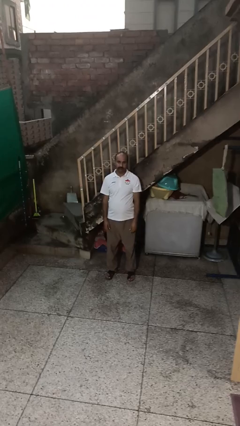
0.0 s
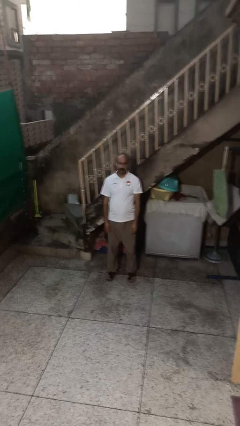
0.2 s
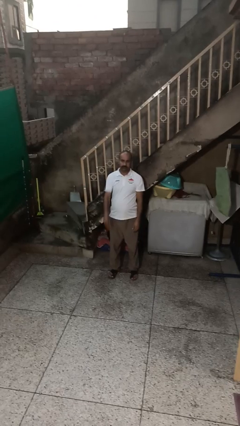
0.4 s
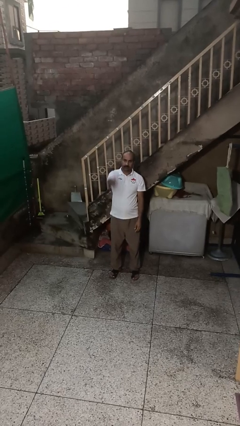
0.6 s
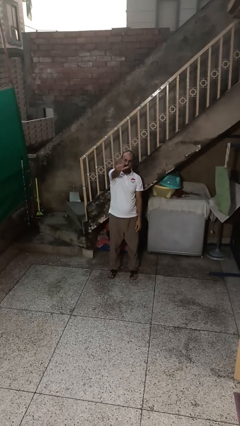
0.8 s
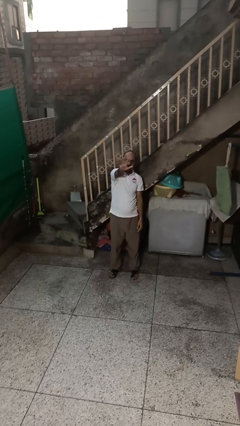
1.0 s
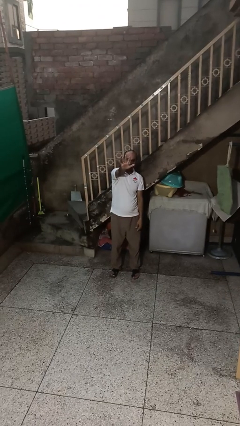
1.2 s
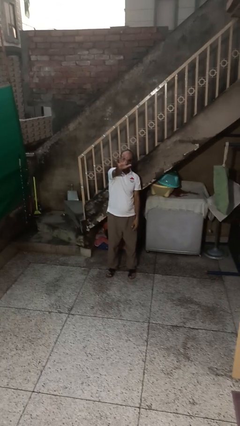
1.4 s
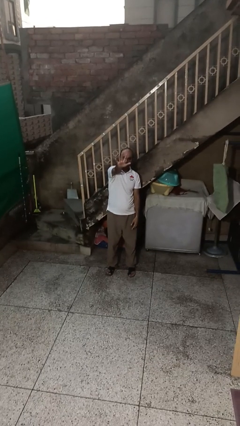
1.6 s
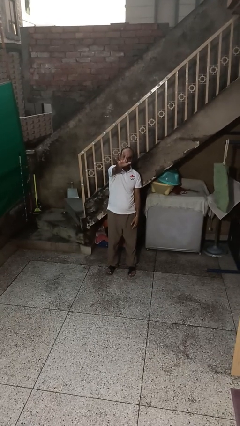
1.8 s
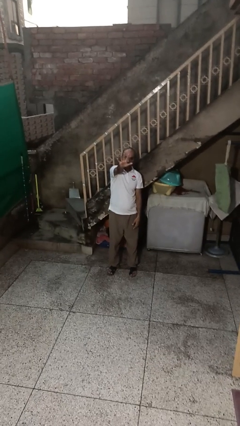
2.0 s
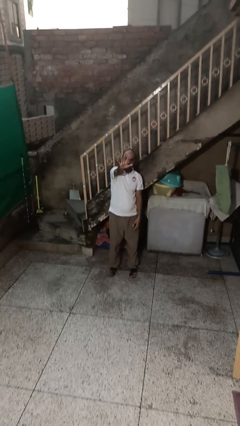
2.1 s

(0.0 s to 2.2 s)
person gestures number five

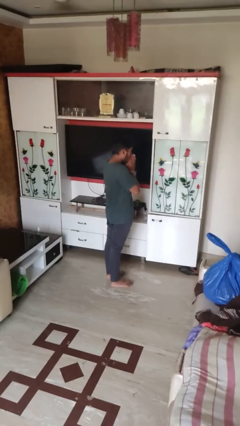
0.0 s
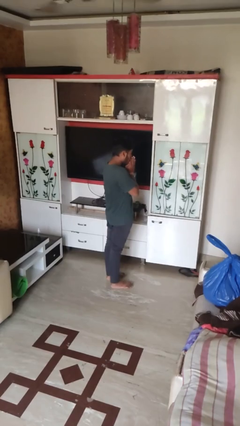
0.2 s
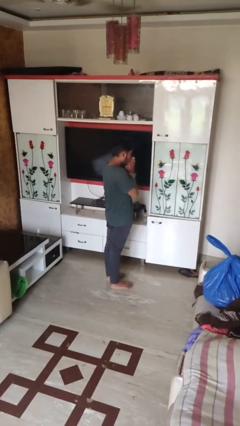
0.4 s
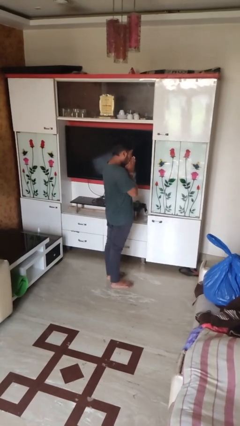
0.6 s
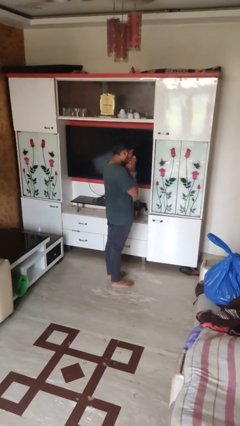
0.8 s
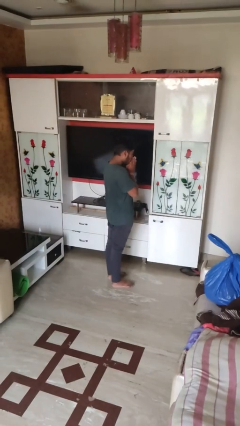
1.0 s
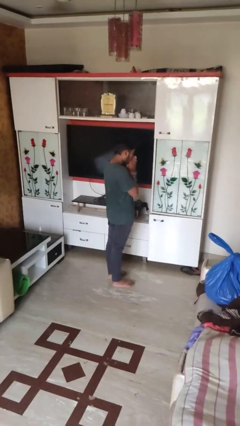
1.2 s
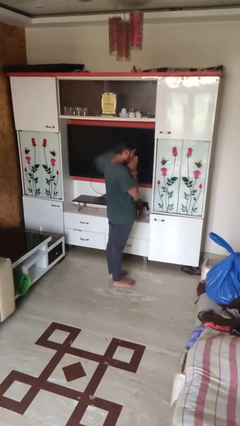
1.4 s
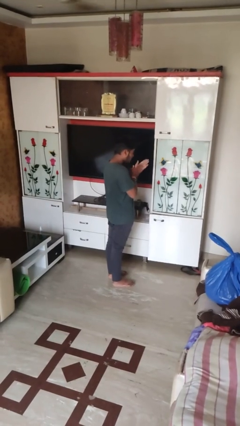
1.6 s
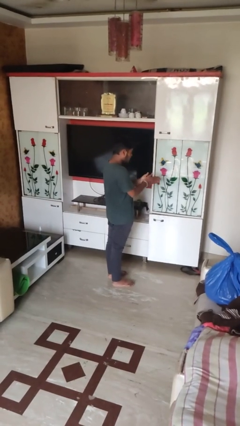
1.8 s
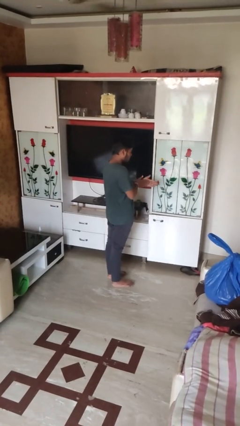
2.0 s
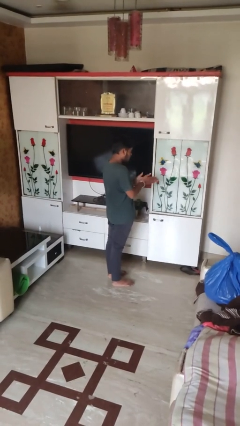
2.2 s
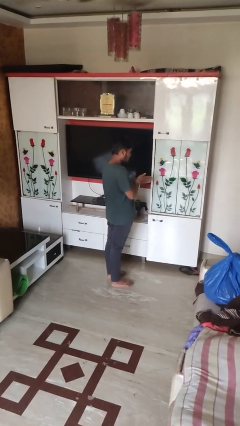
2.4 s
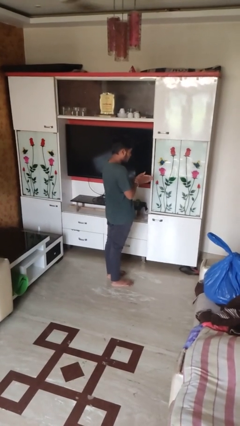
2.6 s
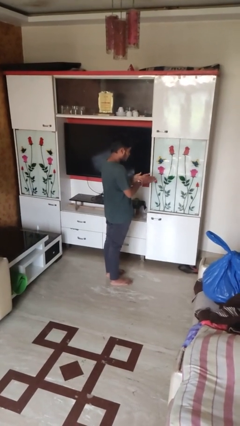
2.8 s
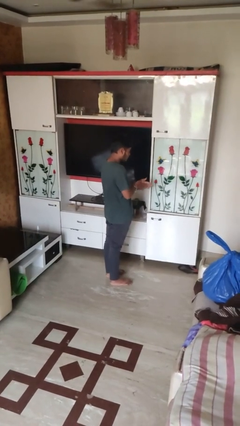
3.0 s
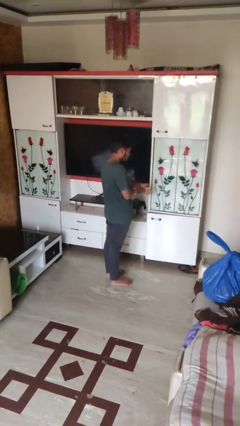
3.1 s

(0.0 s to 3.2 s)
person blows into hands

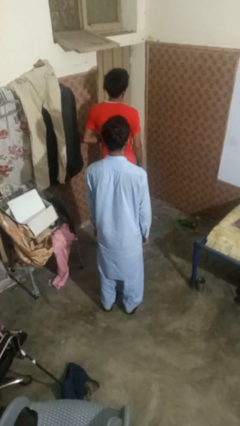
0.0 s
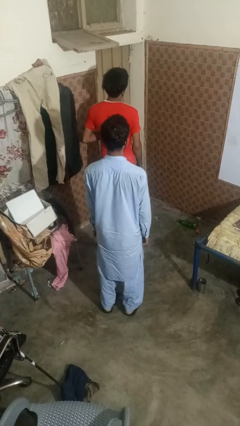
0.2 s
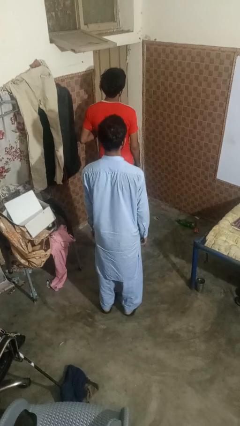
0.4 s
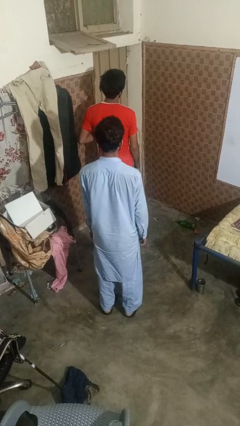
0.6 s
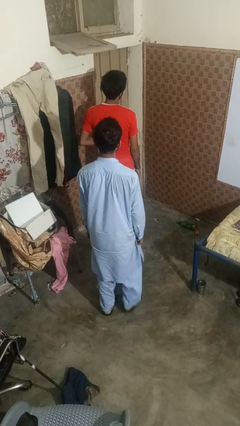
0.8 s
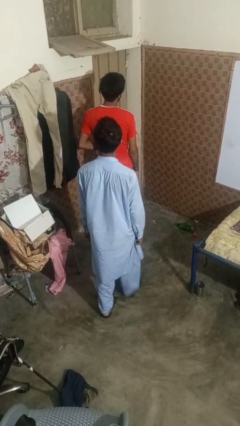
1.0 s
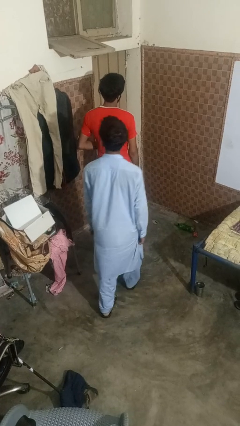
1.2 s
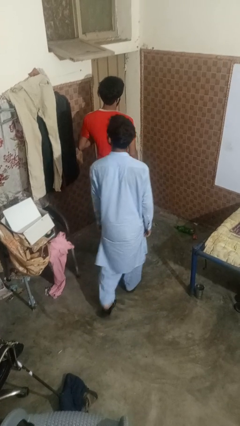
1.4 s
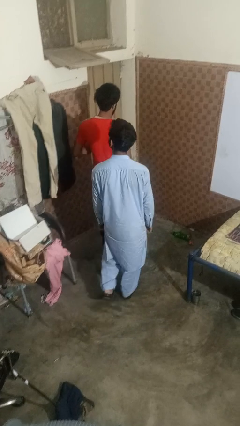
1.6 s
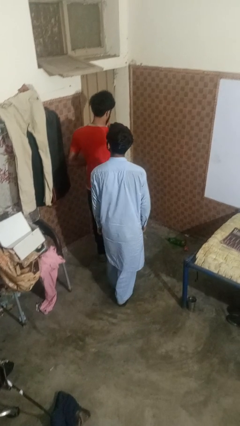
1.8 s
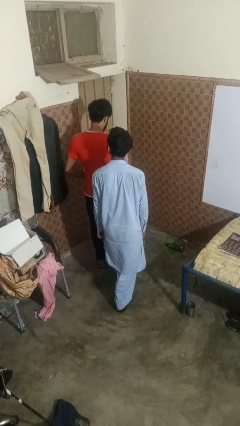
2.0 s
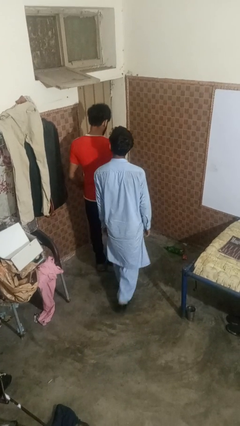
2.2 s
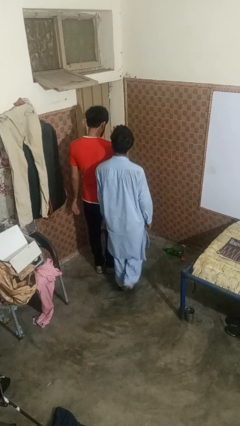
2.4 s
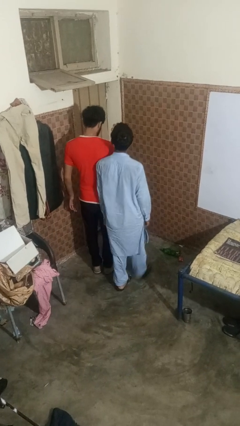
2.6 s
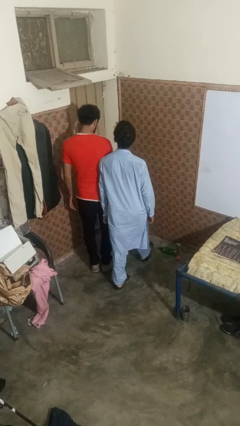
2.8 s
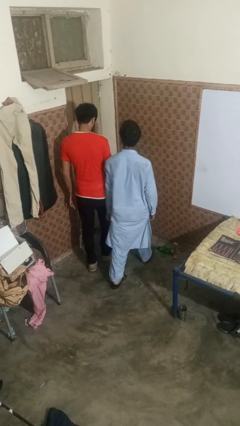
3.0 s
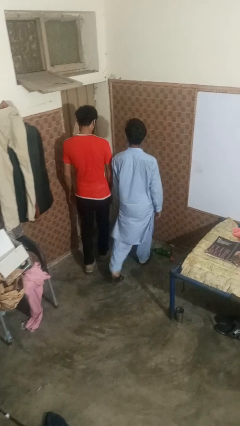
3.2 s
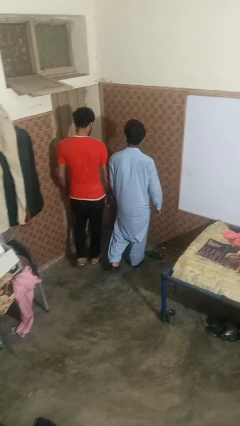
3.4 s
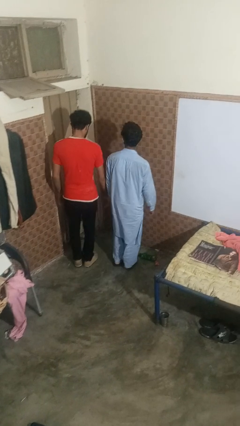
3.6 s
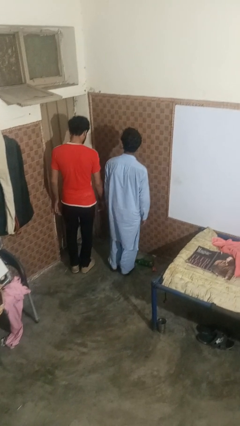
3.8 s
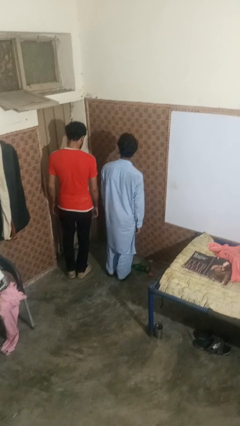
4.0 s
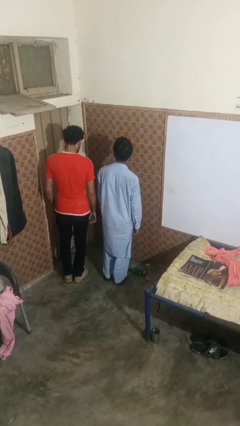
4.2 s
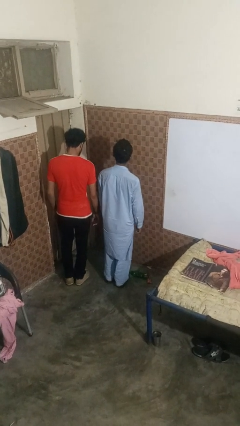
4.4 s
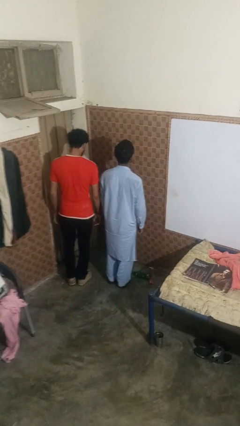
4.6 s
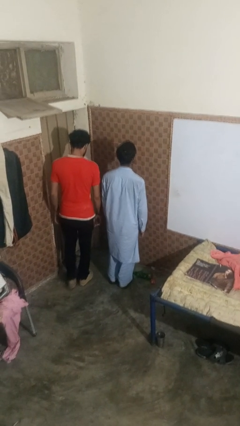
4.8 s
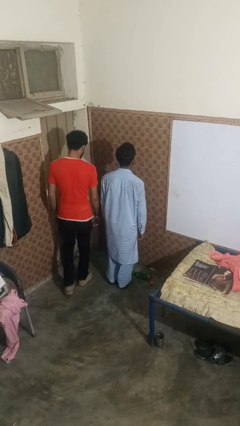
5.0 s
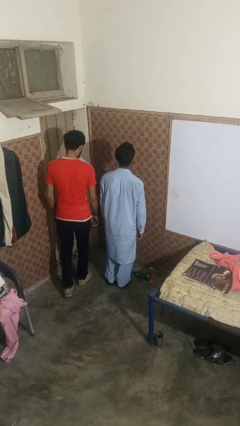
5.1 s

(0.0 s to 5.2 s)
person bumps into person

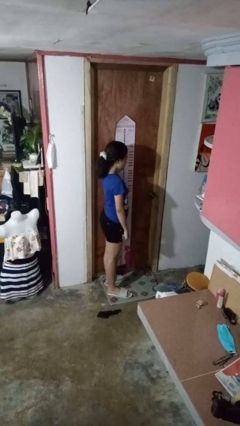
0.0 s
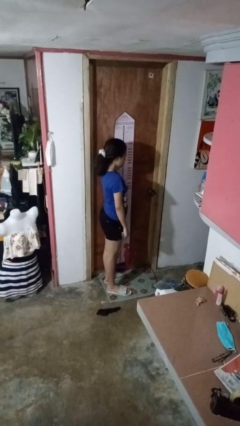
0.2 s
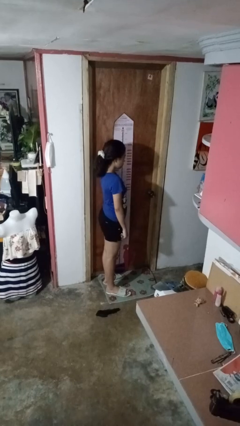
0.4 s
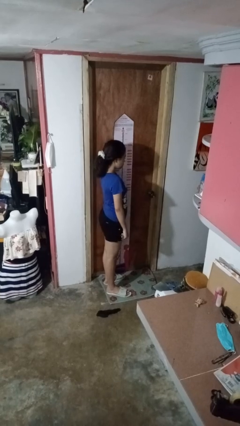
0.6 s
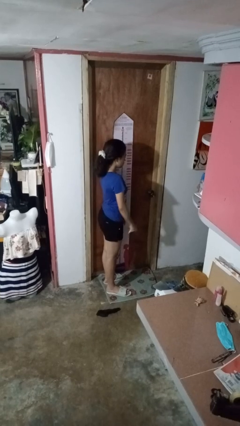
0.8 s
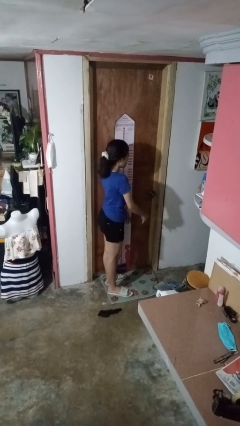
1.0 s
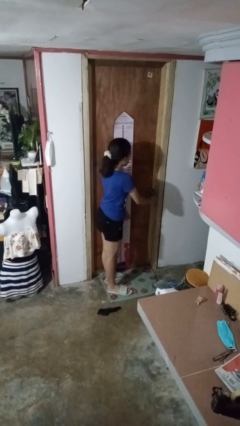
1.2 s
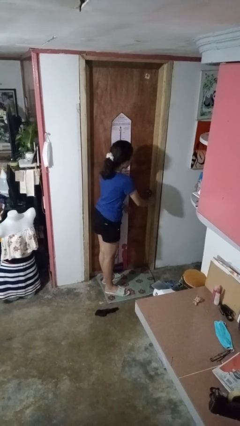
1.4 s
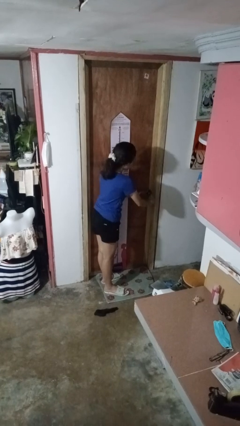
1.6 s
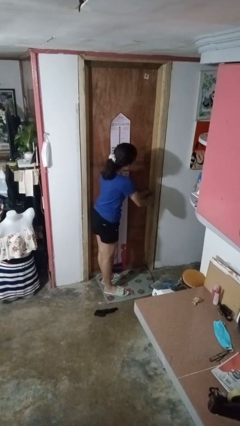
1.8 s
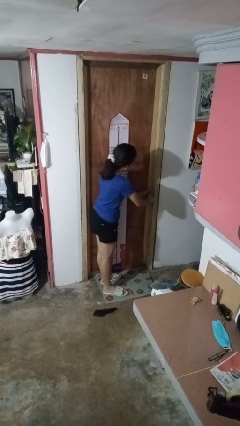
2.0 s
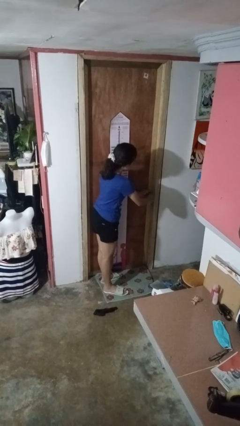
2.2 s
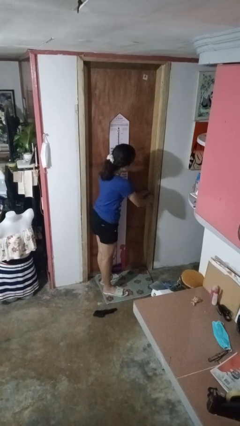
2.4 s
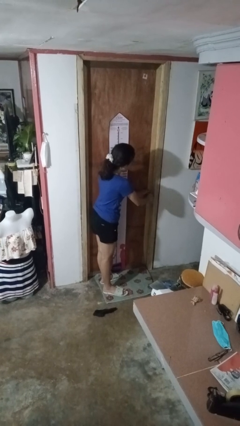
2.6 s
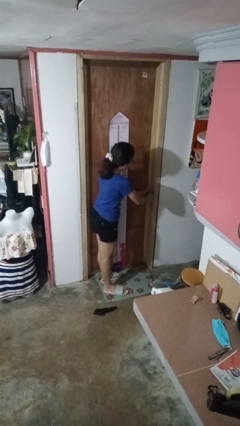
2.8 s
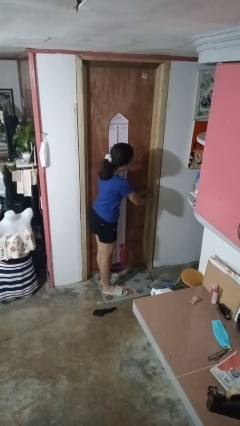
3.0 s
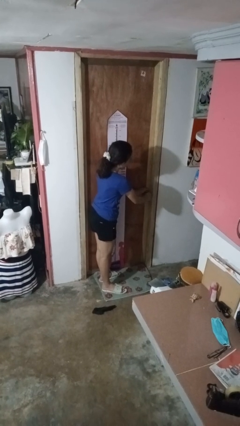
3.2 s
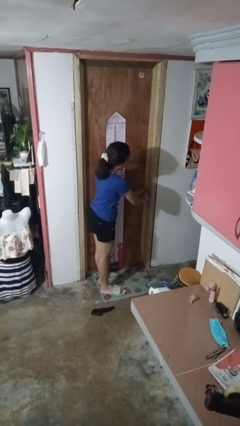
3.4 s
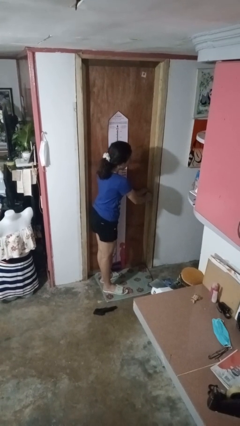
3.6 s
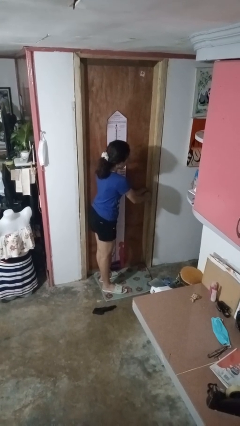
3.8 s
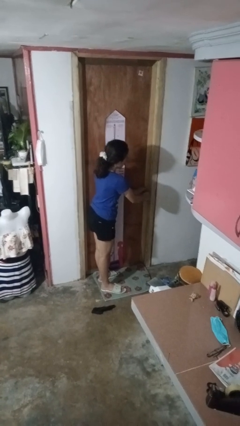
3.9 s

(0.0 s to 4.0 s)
person unlocks door with keys

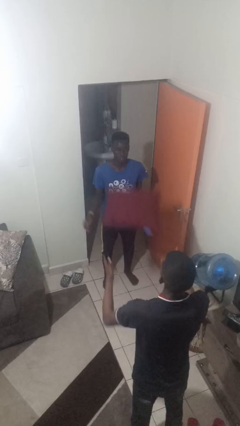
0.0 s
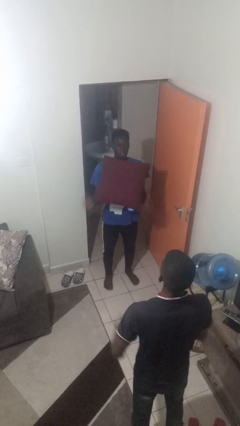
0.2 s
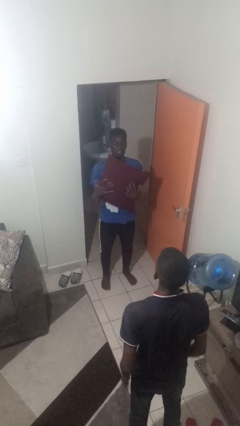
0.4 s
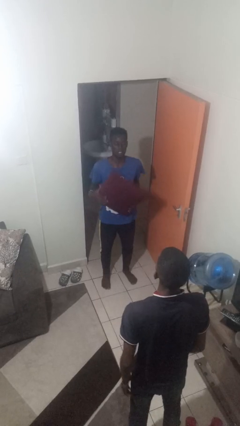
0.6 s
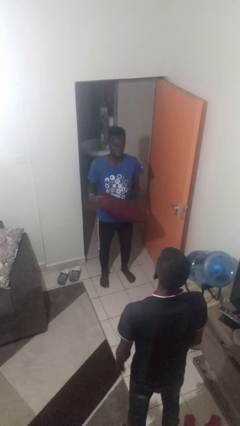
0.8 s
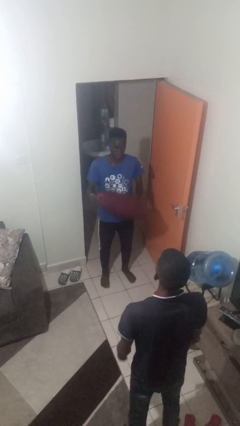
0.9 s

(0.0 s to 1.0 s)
person catches object from person

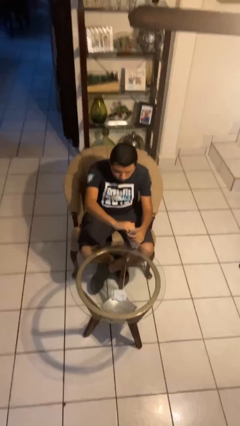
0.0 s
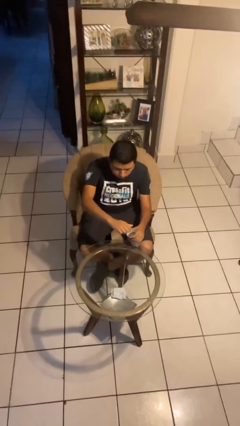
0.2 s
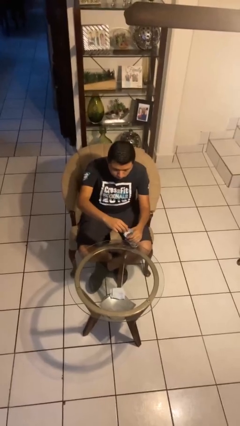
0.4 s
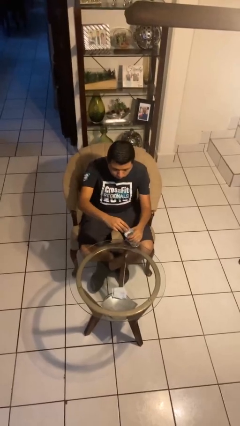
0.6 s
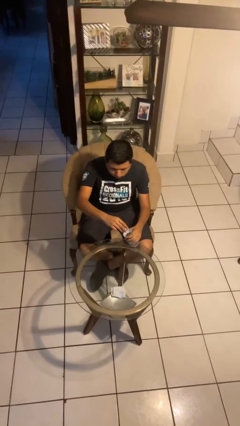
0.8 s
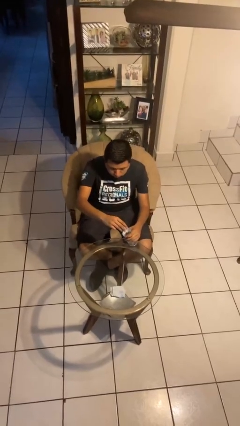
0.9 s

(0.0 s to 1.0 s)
person unscrews lid from bottle

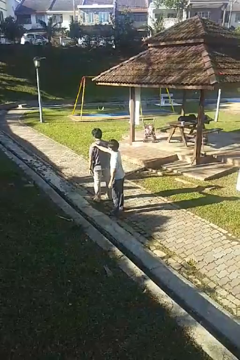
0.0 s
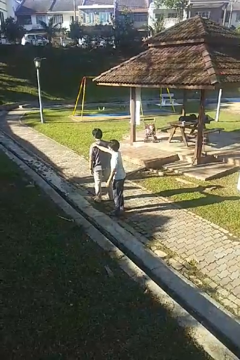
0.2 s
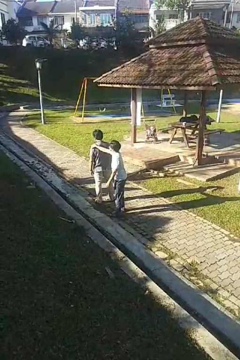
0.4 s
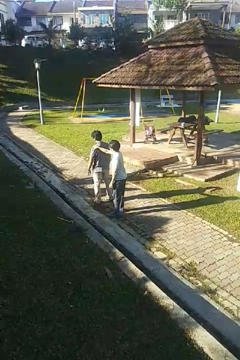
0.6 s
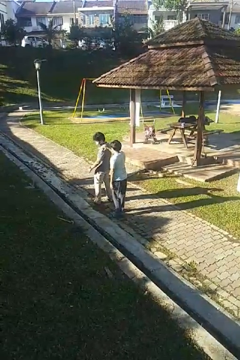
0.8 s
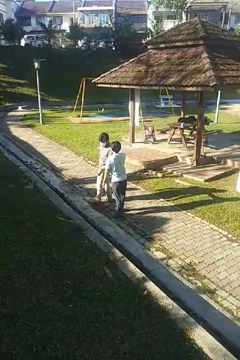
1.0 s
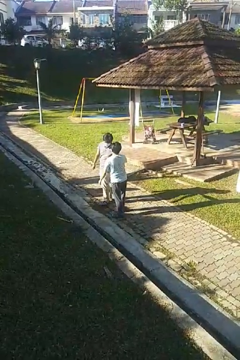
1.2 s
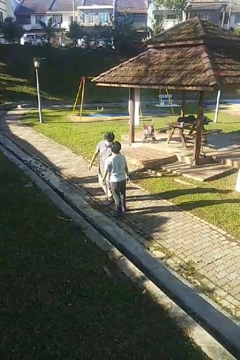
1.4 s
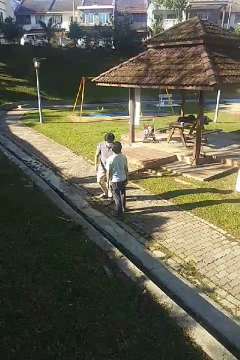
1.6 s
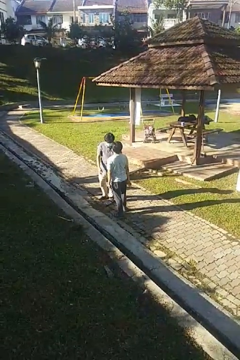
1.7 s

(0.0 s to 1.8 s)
person spins person around
